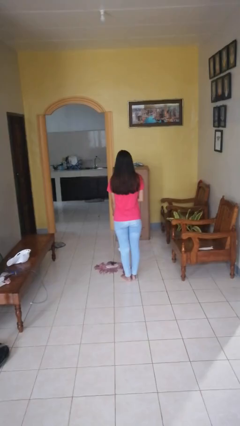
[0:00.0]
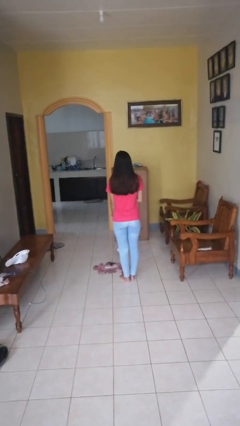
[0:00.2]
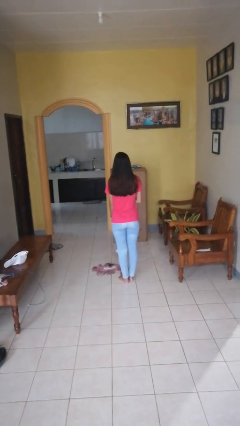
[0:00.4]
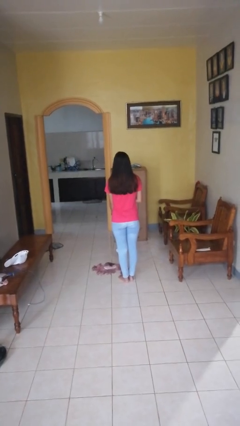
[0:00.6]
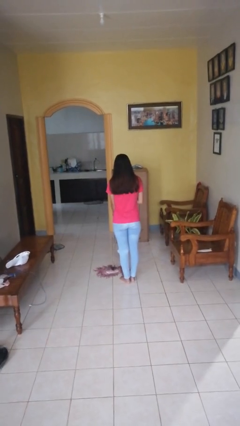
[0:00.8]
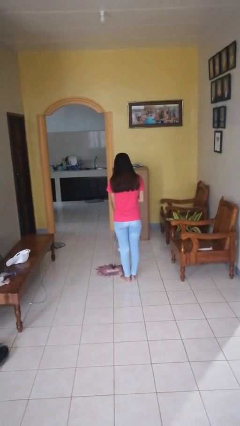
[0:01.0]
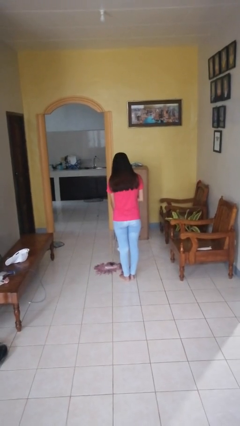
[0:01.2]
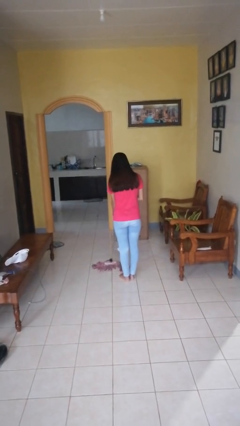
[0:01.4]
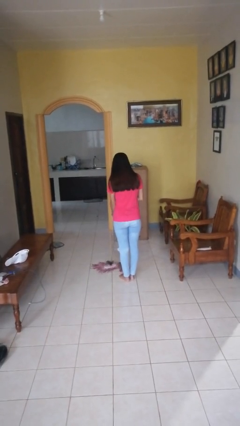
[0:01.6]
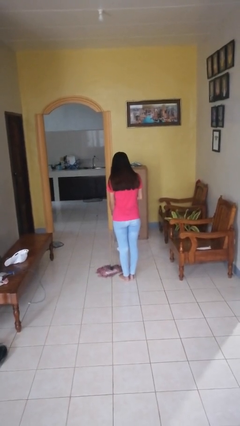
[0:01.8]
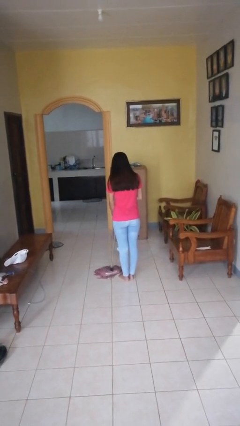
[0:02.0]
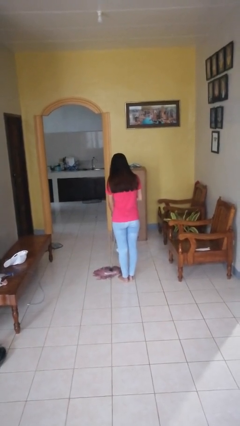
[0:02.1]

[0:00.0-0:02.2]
person mops

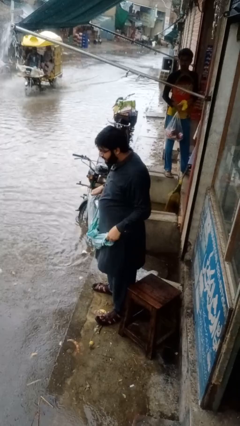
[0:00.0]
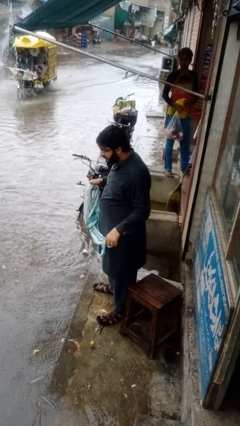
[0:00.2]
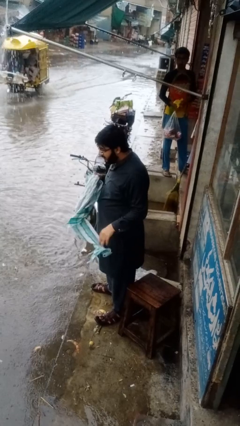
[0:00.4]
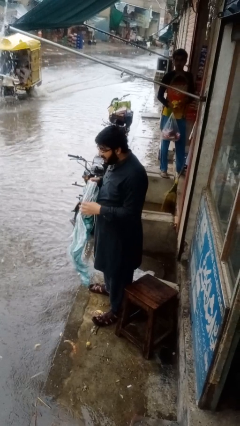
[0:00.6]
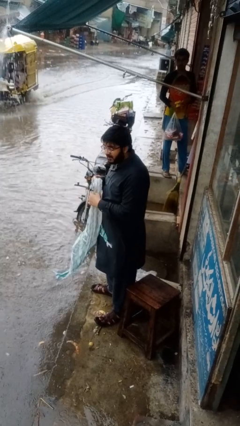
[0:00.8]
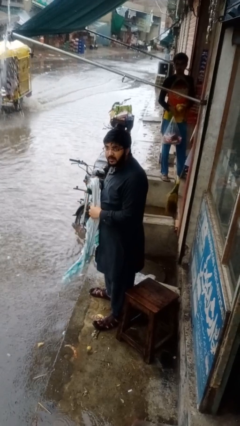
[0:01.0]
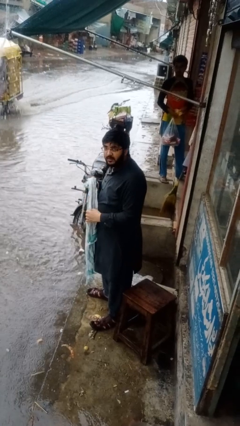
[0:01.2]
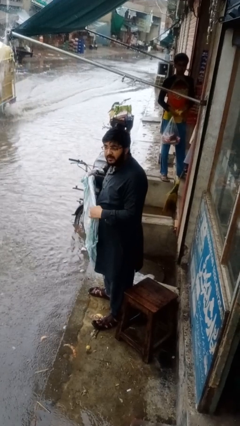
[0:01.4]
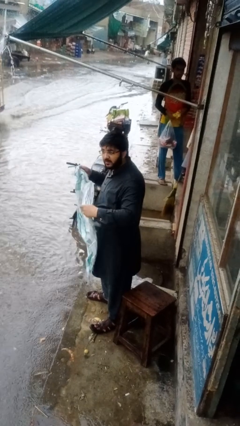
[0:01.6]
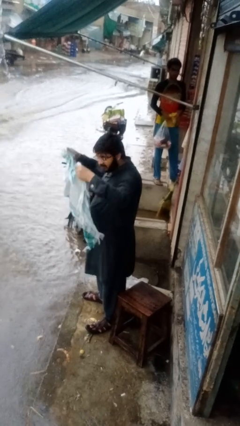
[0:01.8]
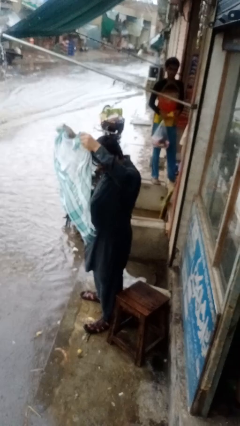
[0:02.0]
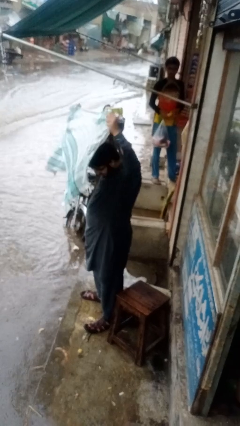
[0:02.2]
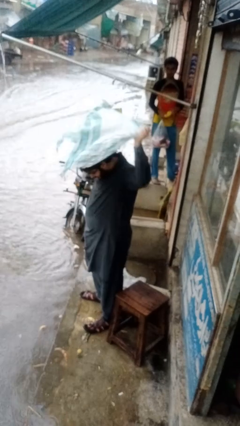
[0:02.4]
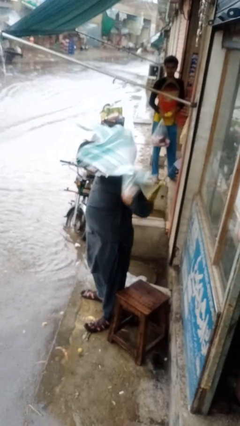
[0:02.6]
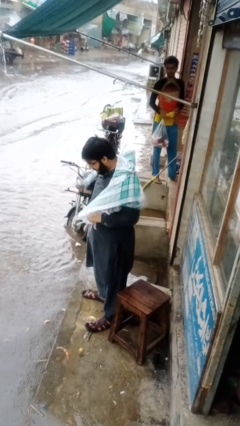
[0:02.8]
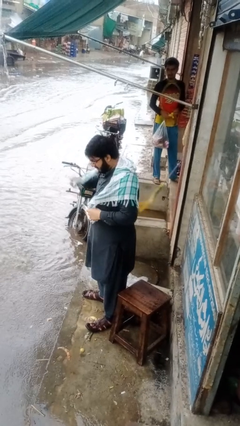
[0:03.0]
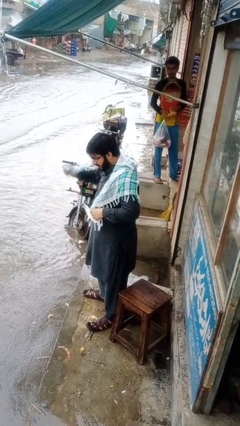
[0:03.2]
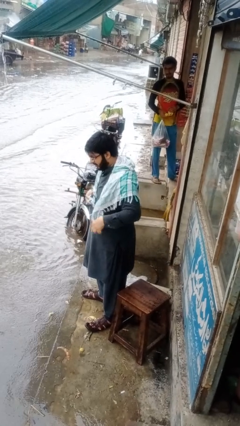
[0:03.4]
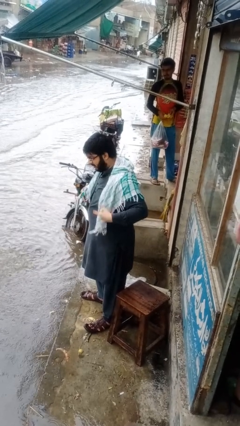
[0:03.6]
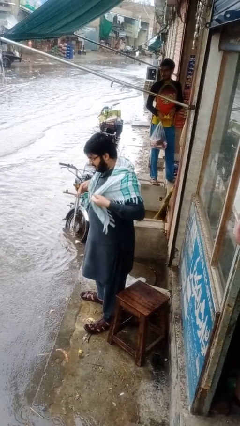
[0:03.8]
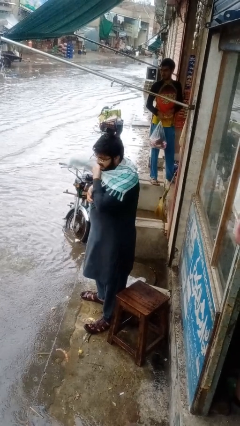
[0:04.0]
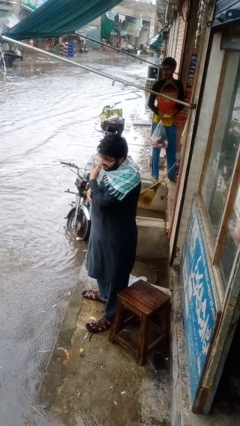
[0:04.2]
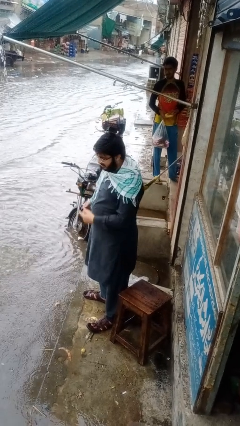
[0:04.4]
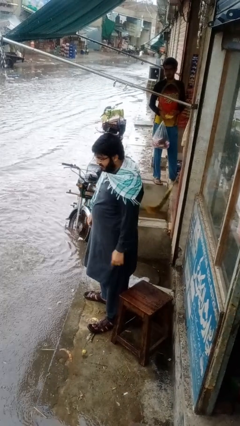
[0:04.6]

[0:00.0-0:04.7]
person puts on scarf

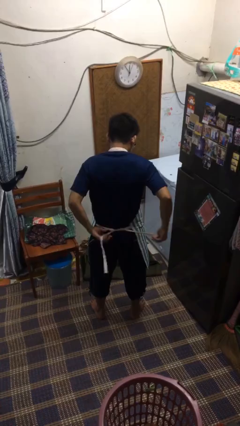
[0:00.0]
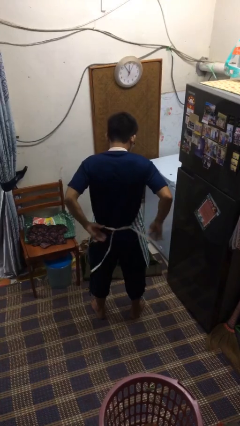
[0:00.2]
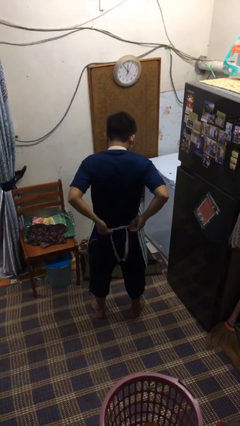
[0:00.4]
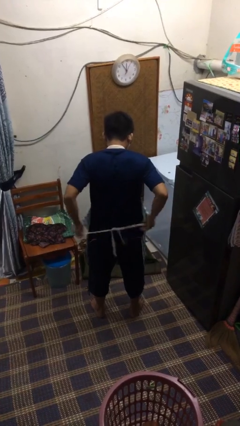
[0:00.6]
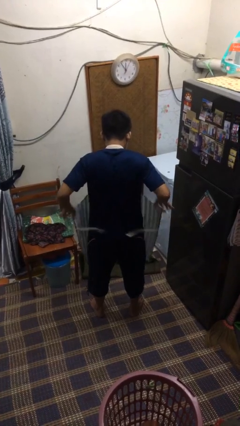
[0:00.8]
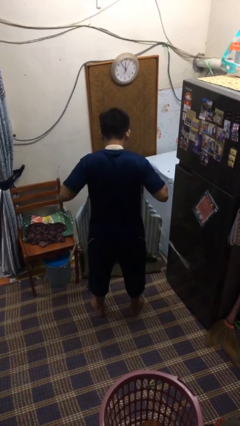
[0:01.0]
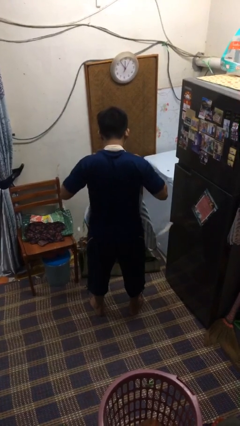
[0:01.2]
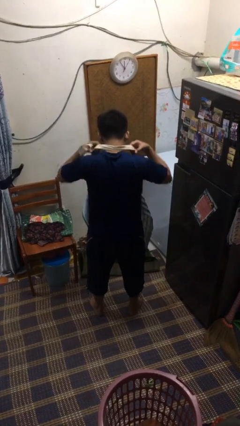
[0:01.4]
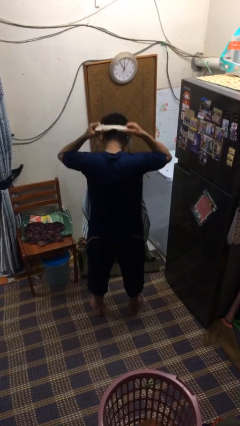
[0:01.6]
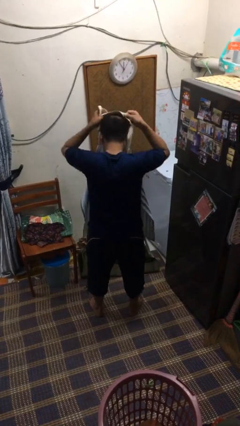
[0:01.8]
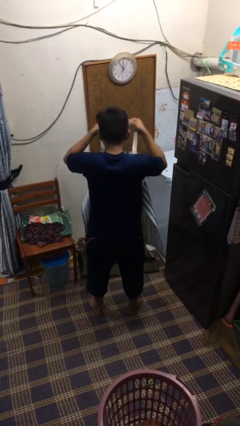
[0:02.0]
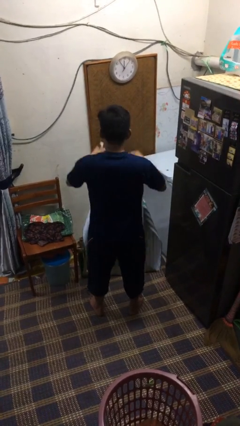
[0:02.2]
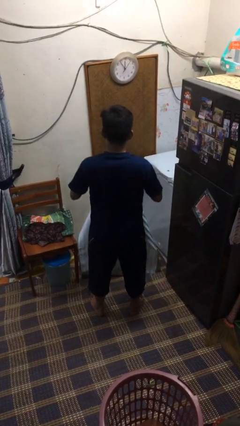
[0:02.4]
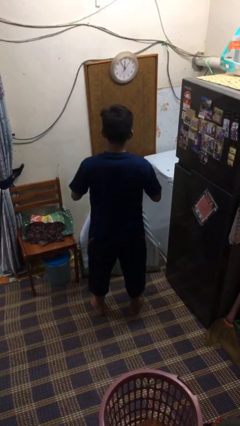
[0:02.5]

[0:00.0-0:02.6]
person takes off apron

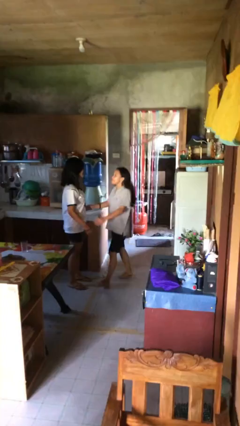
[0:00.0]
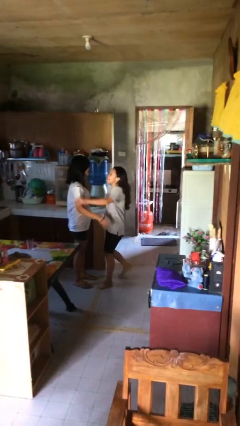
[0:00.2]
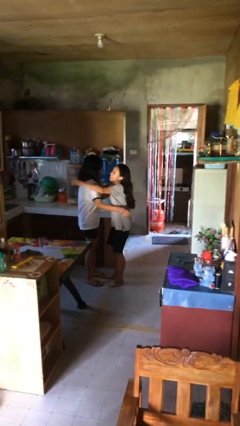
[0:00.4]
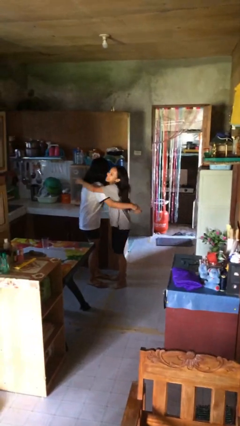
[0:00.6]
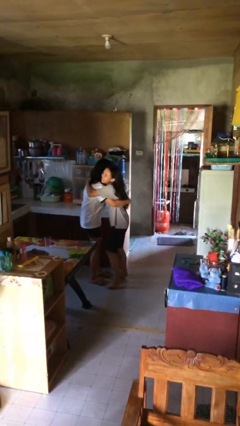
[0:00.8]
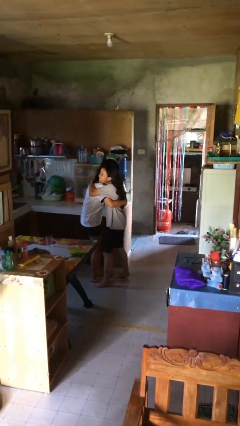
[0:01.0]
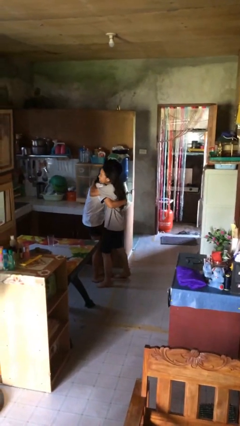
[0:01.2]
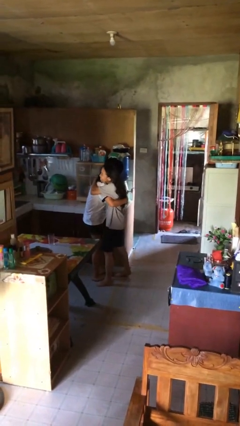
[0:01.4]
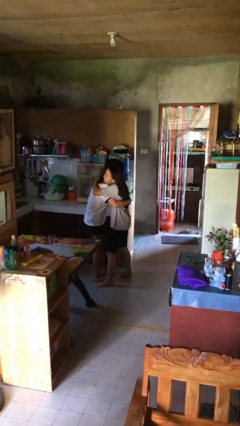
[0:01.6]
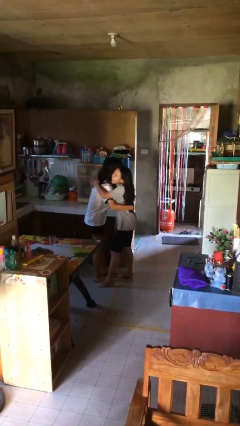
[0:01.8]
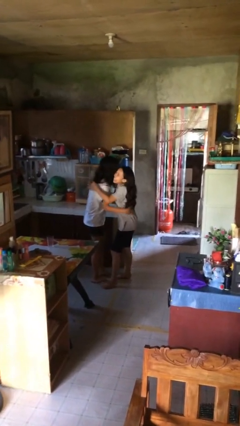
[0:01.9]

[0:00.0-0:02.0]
person embraces person

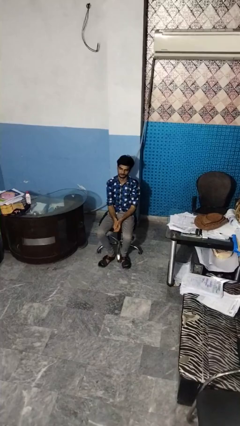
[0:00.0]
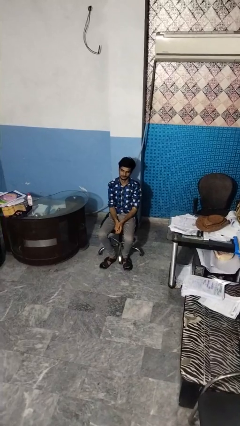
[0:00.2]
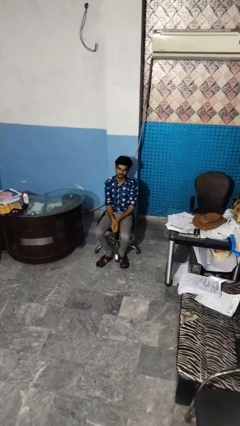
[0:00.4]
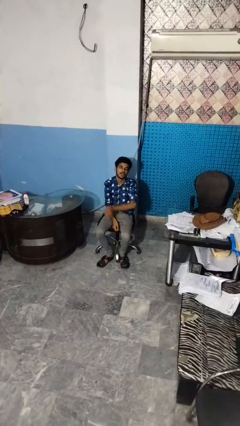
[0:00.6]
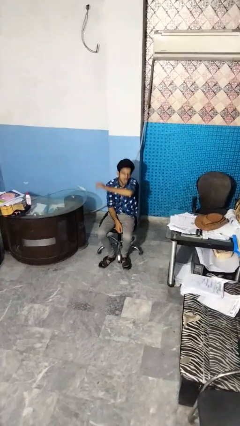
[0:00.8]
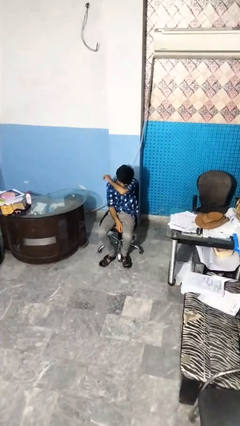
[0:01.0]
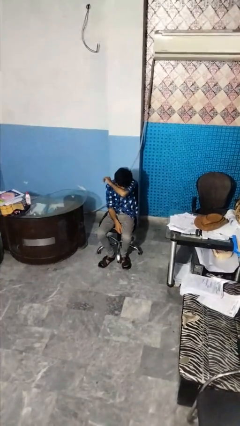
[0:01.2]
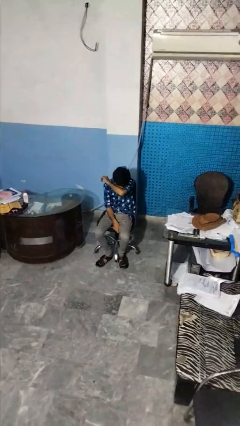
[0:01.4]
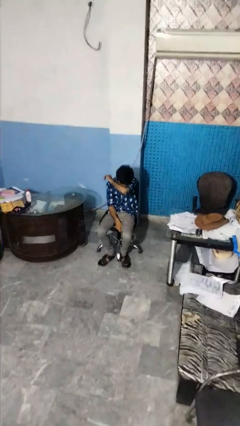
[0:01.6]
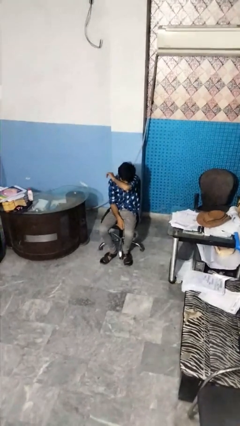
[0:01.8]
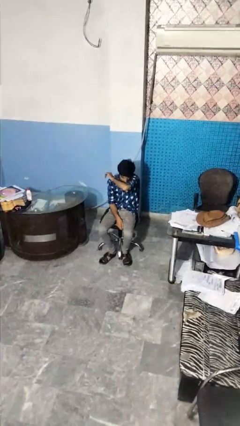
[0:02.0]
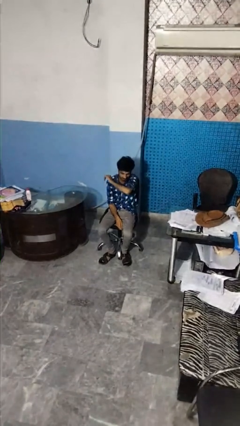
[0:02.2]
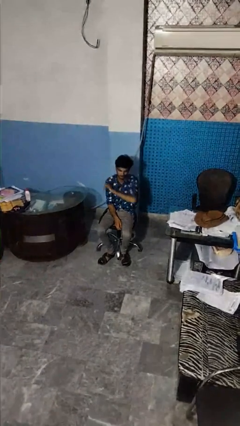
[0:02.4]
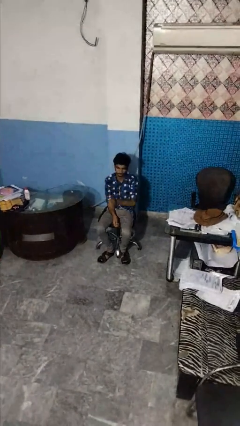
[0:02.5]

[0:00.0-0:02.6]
person sneezes into arm

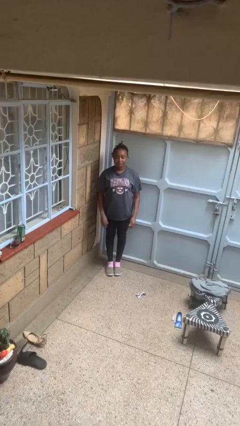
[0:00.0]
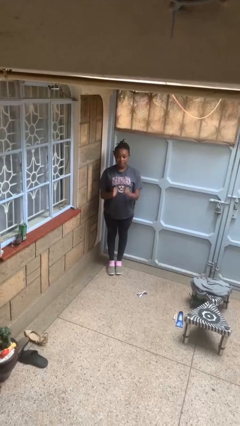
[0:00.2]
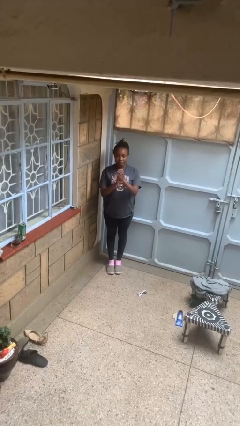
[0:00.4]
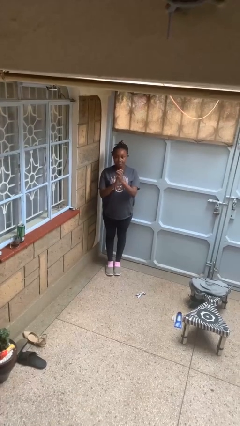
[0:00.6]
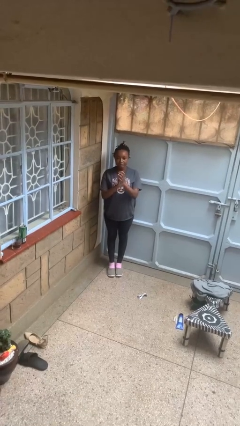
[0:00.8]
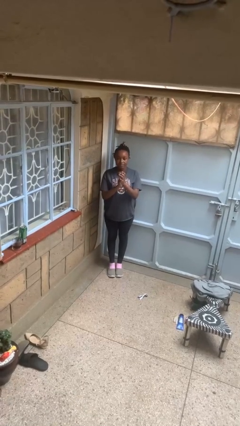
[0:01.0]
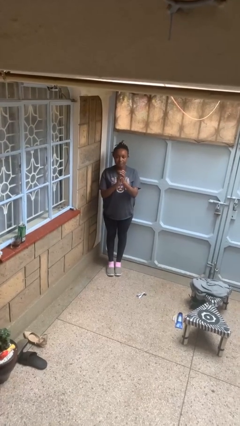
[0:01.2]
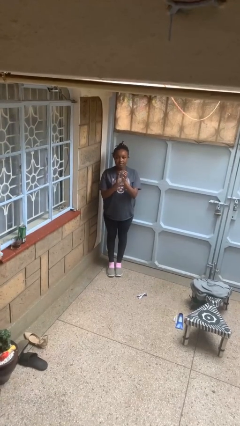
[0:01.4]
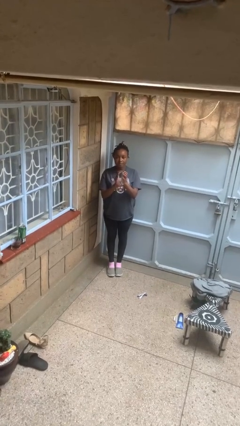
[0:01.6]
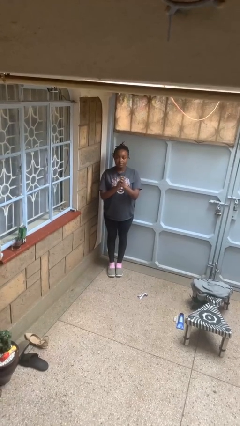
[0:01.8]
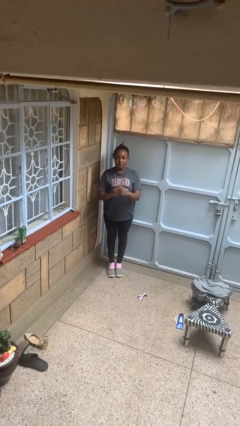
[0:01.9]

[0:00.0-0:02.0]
person claps hands

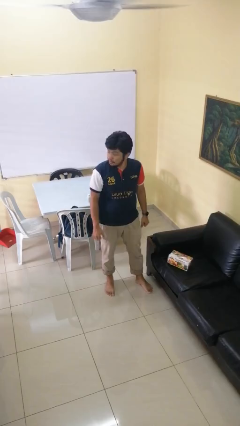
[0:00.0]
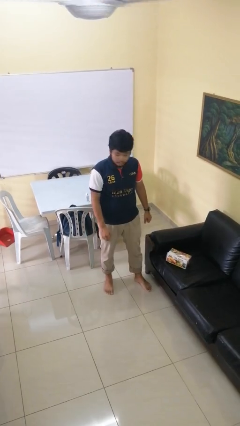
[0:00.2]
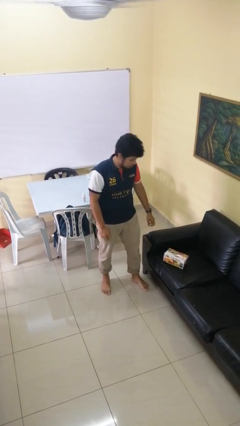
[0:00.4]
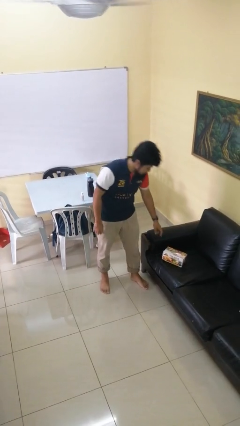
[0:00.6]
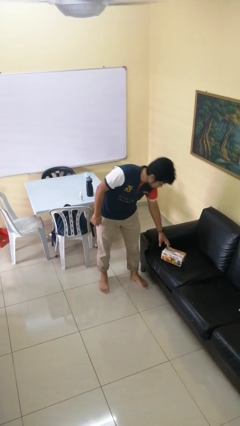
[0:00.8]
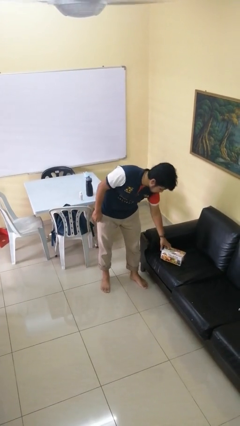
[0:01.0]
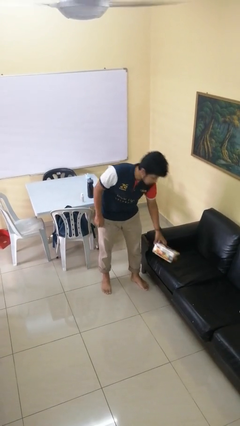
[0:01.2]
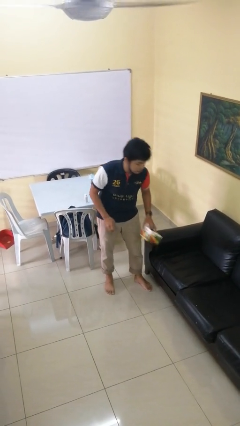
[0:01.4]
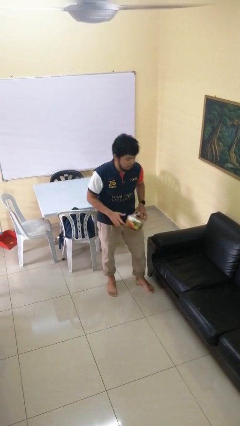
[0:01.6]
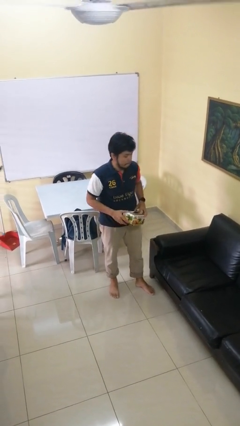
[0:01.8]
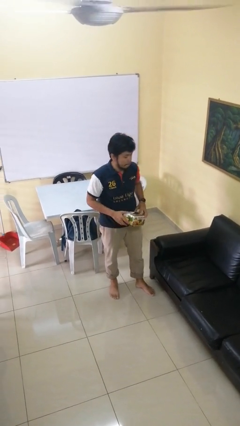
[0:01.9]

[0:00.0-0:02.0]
person picks up object from couch
